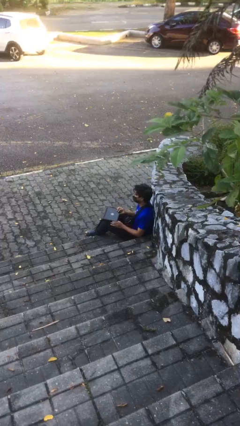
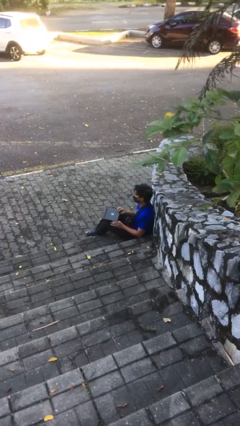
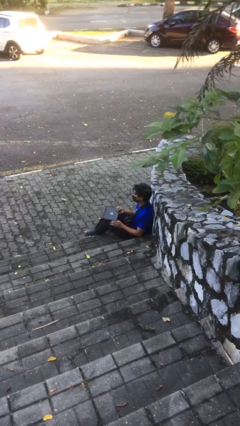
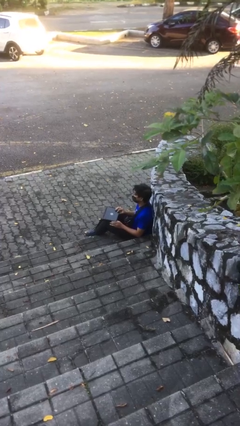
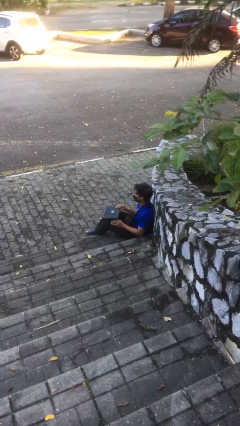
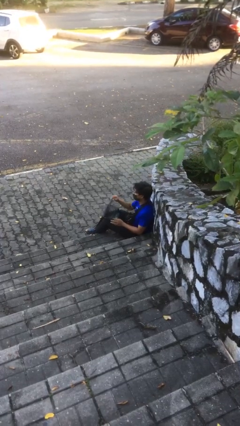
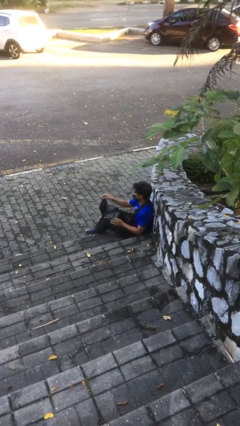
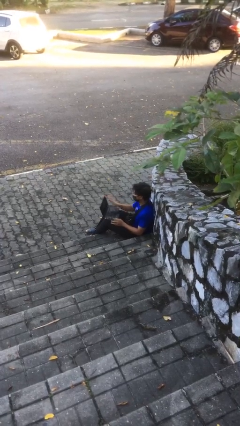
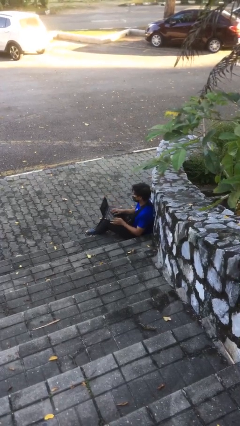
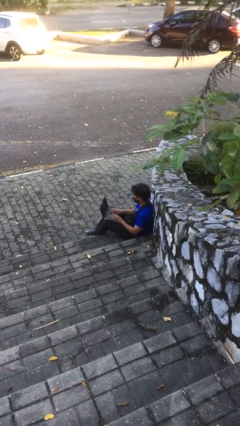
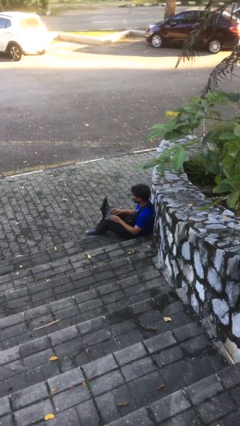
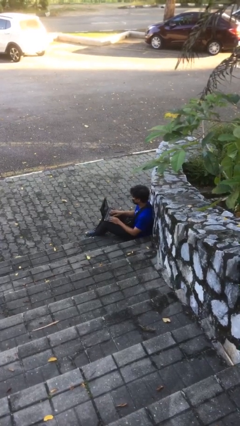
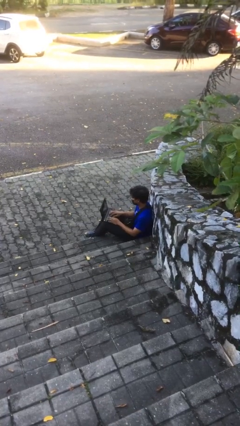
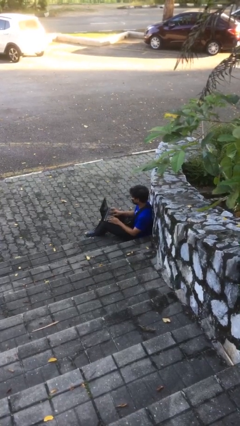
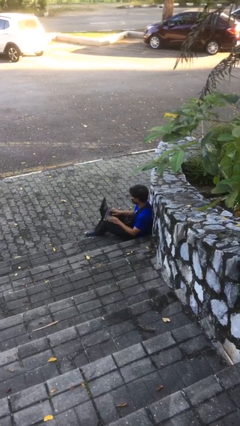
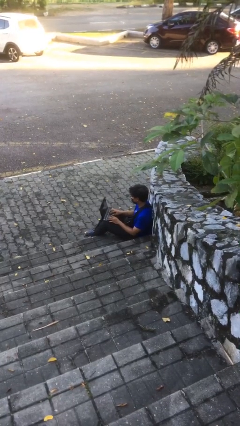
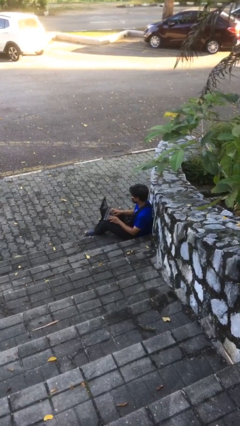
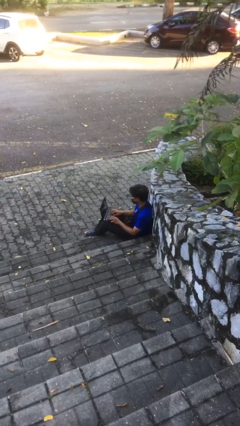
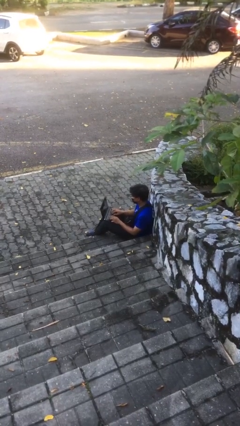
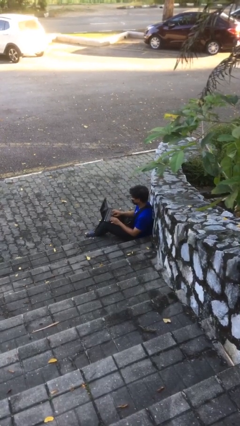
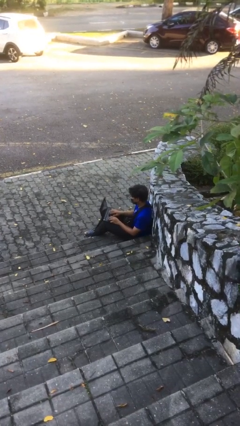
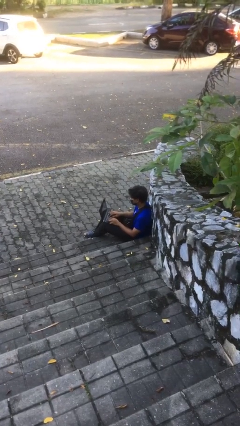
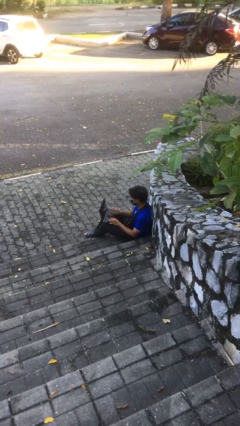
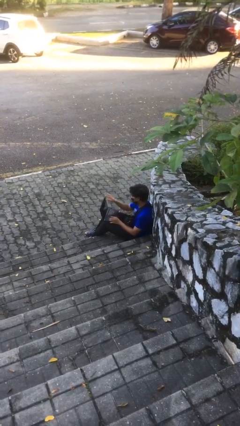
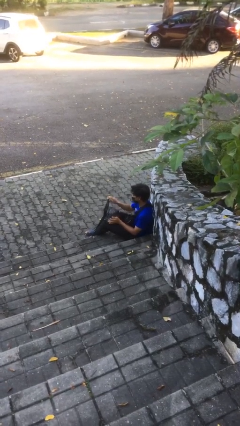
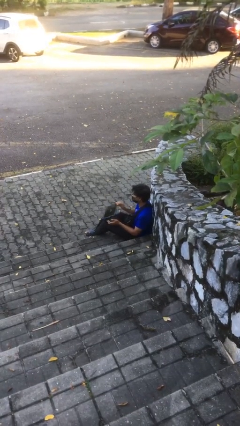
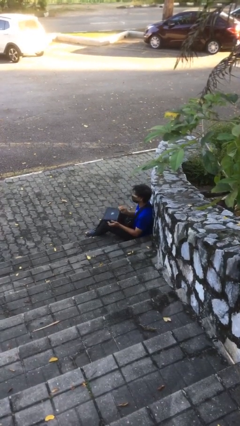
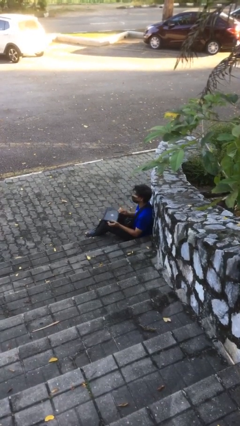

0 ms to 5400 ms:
person interacts with laptop

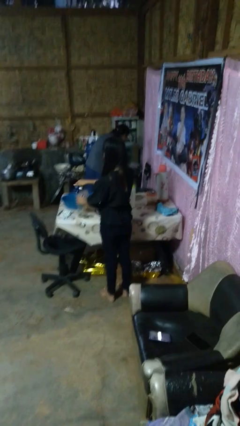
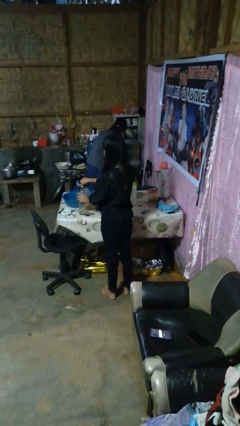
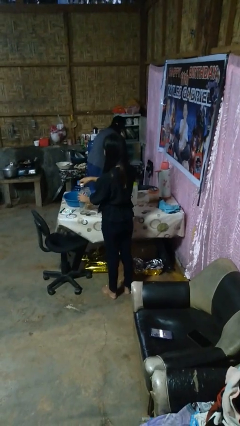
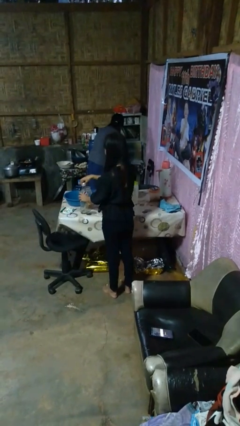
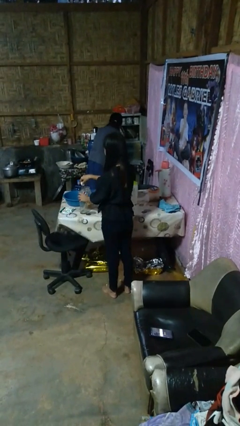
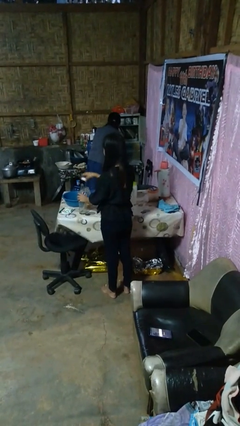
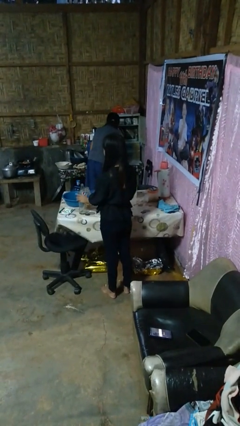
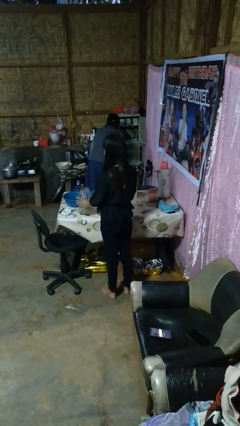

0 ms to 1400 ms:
person unscrews lid from bottle

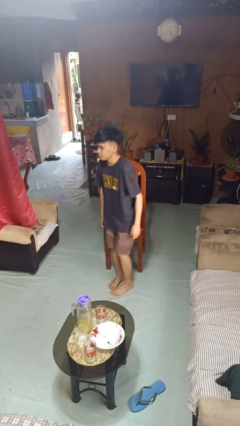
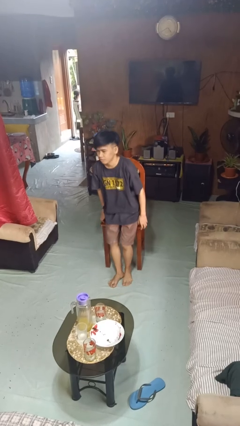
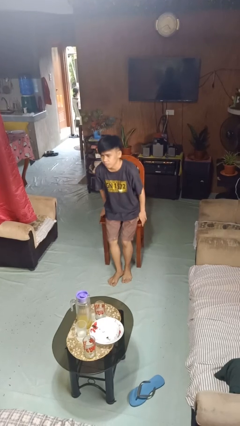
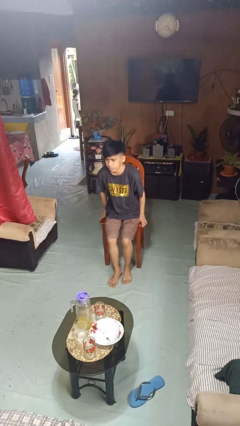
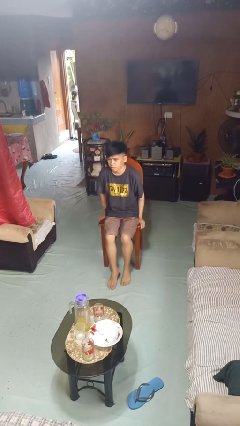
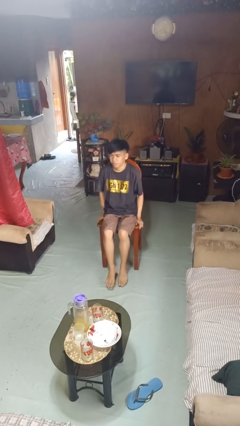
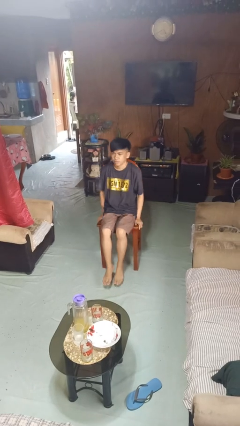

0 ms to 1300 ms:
person sits down

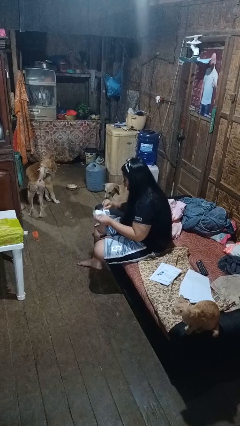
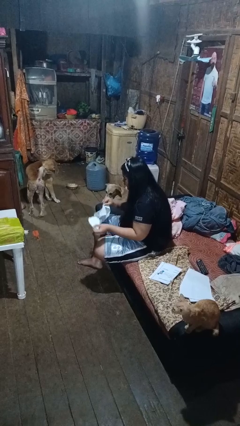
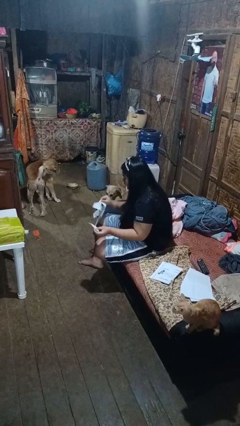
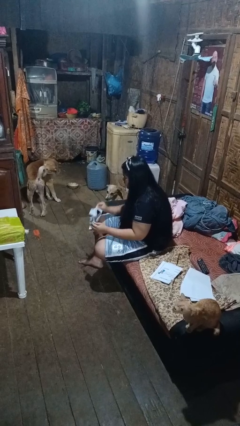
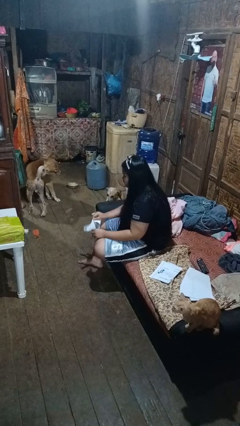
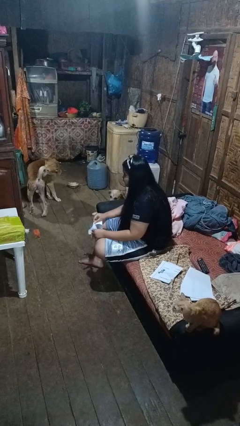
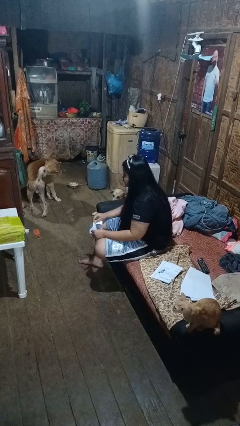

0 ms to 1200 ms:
person tears paper

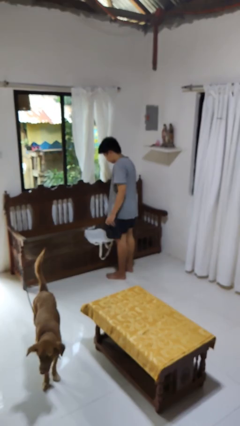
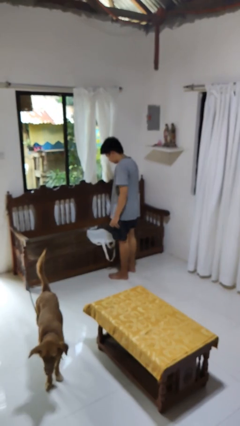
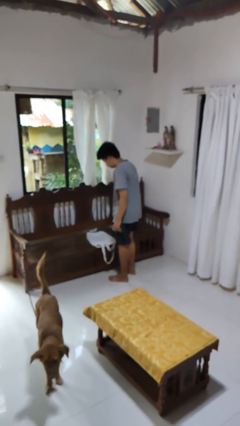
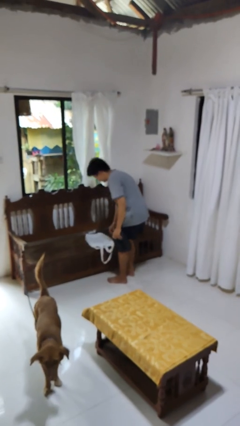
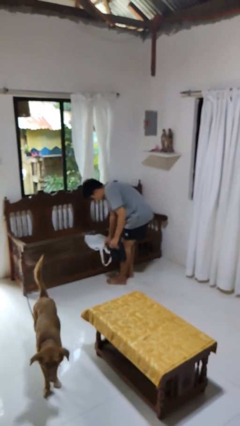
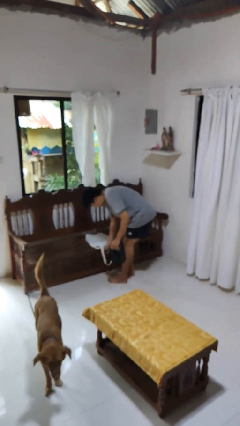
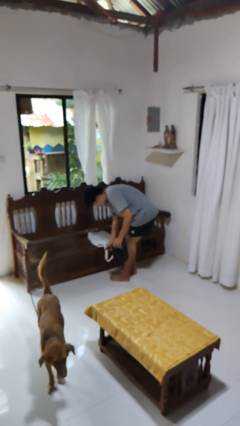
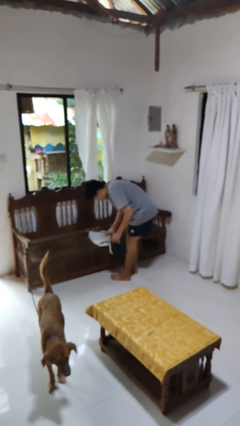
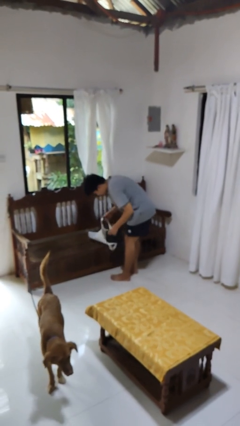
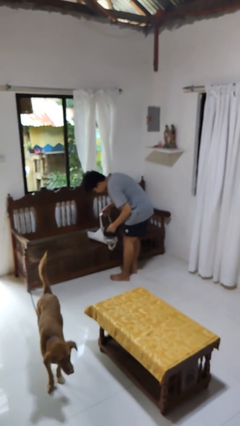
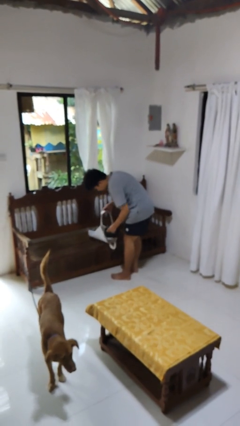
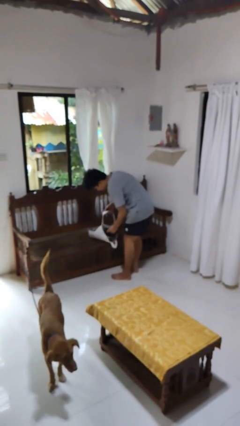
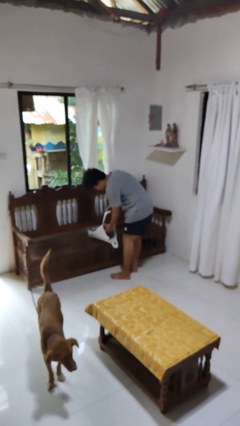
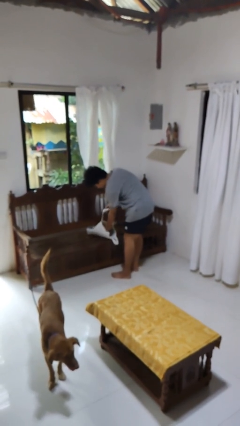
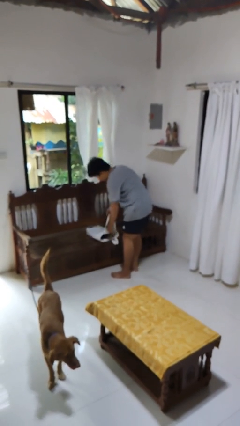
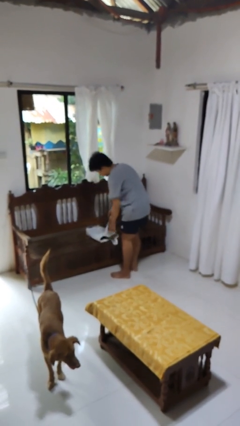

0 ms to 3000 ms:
person puts object into bag

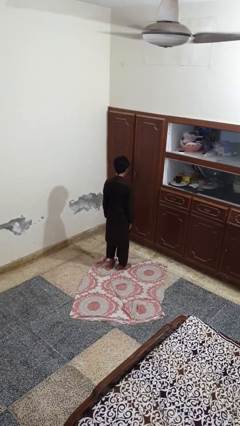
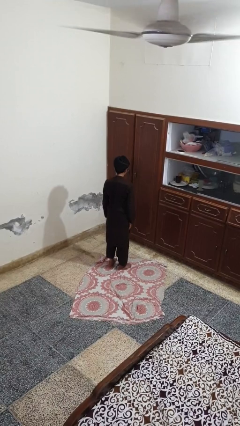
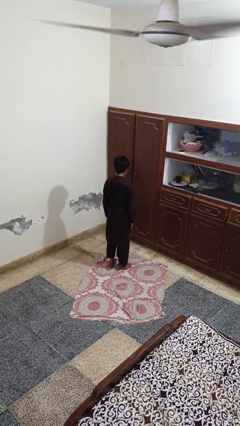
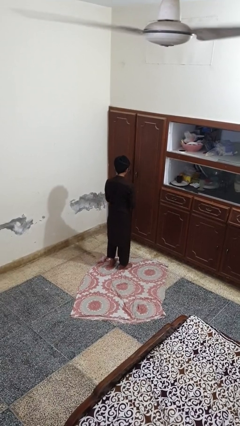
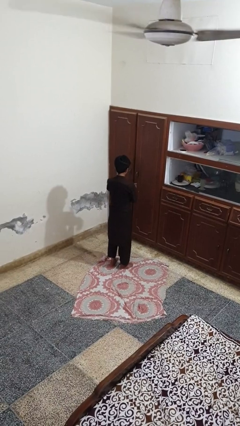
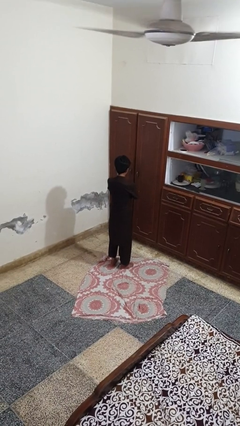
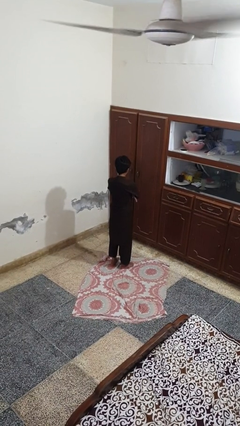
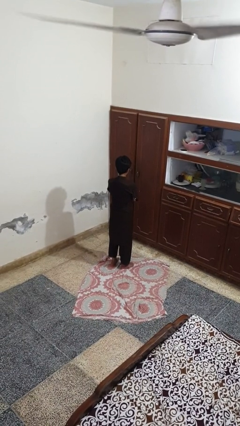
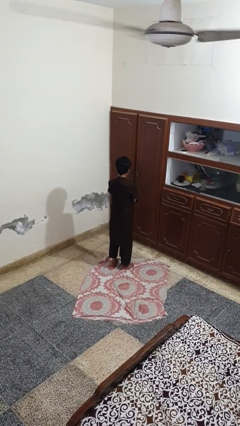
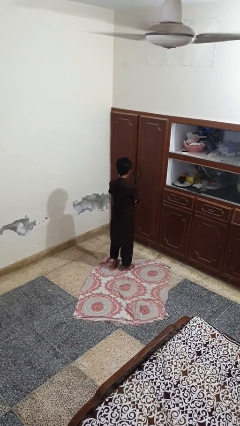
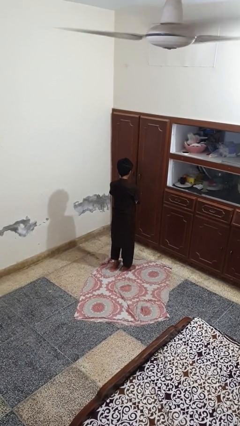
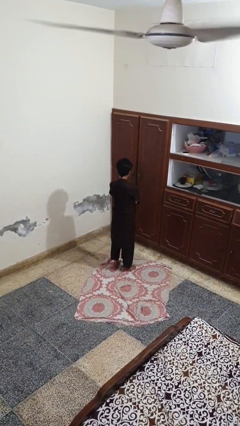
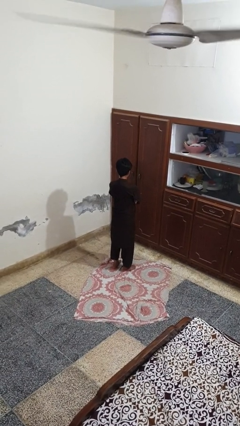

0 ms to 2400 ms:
person crosses arms

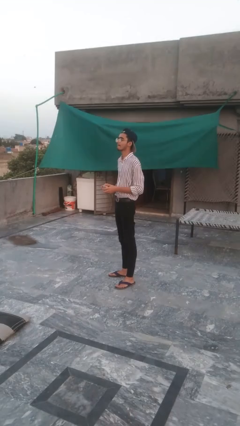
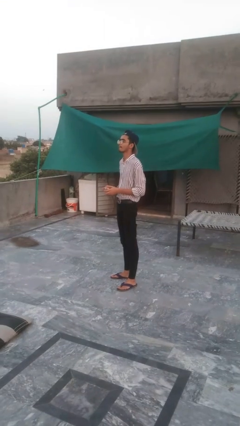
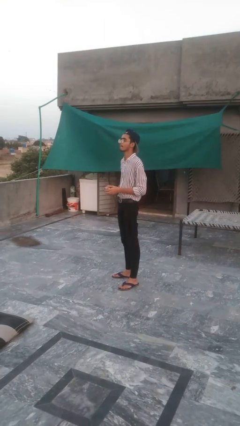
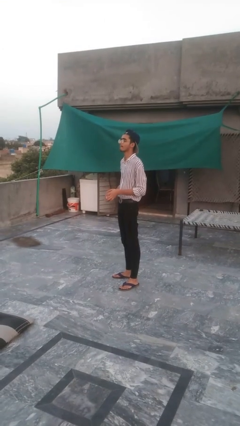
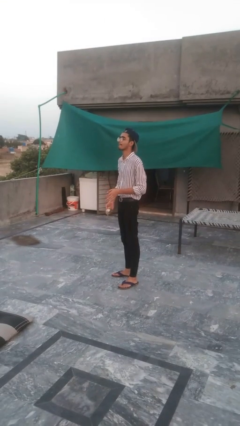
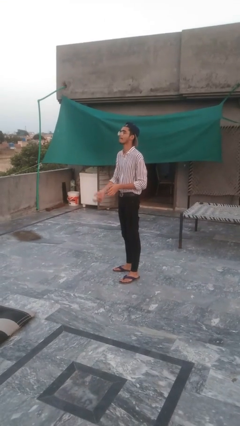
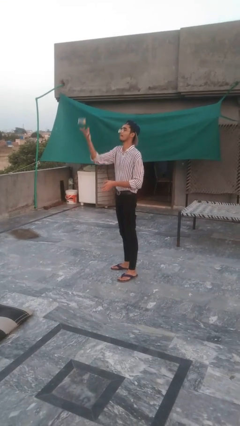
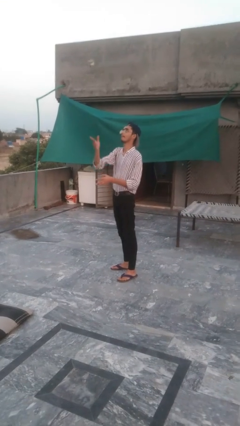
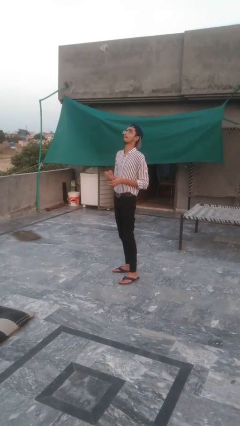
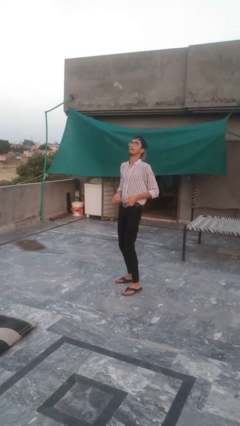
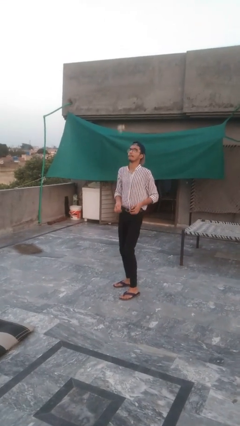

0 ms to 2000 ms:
person drops object

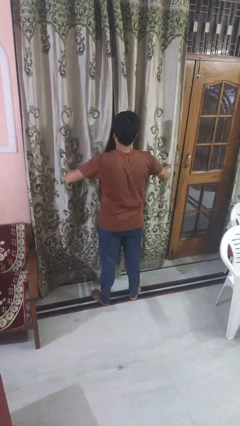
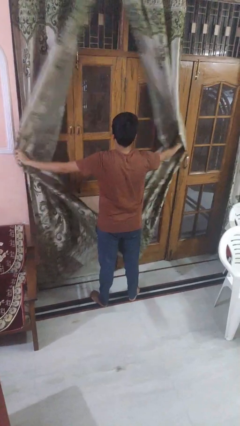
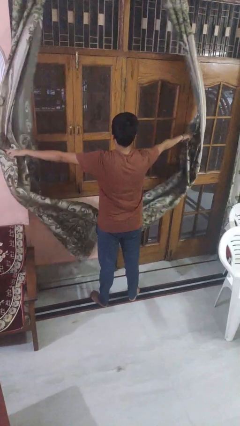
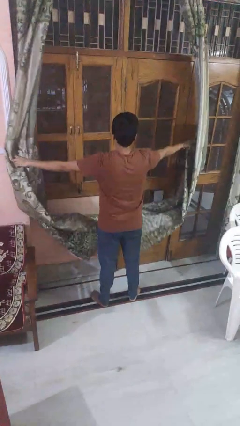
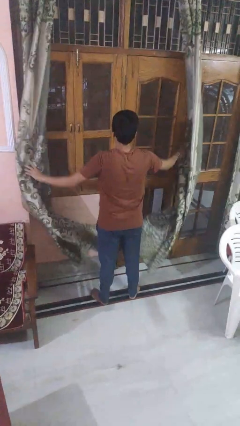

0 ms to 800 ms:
person opens curtains
